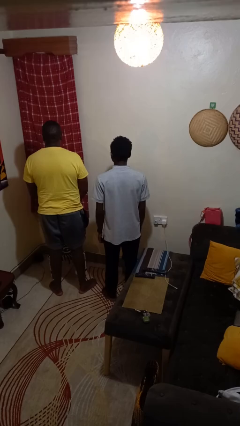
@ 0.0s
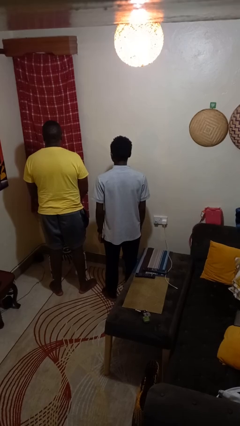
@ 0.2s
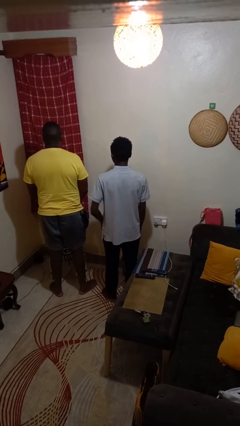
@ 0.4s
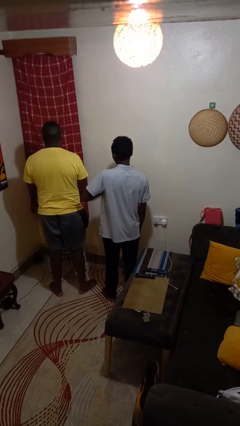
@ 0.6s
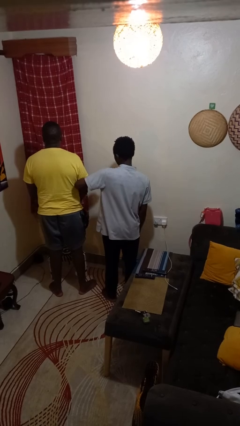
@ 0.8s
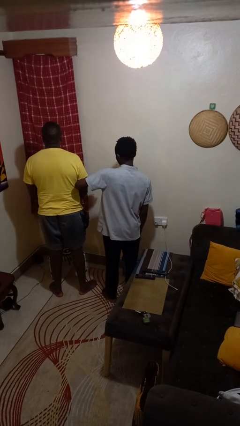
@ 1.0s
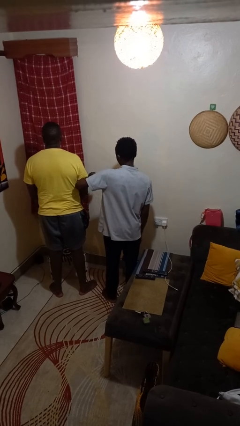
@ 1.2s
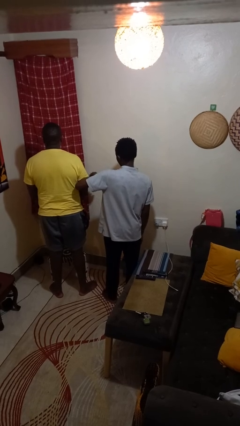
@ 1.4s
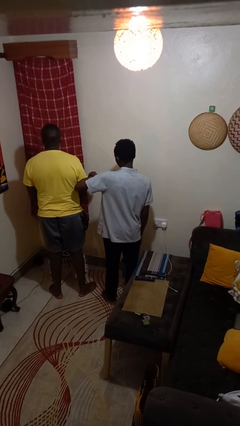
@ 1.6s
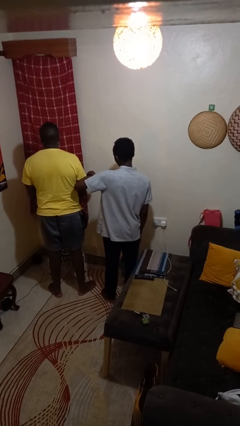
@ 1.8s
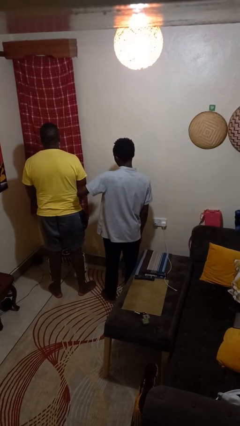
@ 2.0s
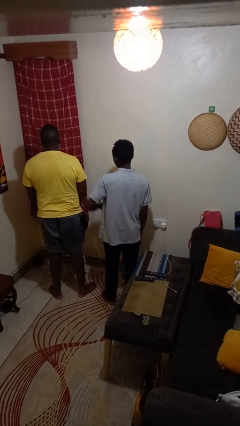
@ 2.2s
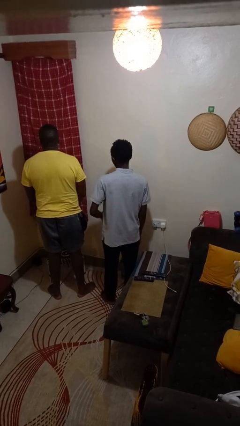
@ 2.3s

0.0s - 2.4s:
person nudges person with elbow

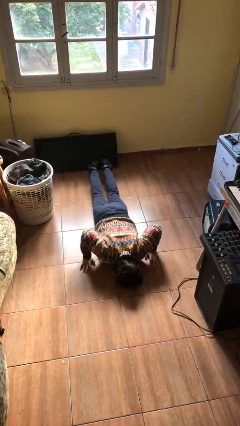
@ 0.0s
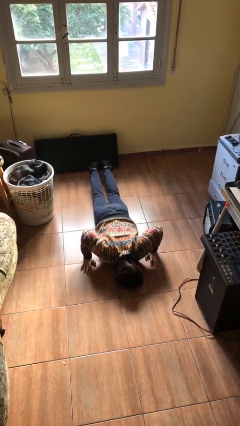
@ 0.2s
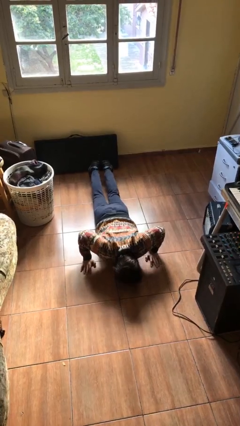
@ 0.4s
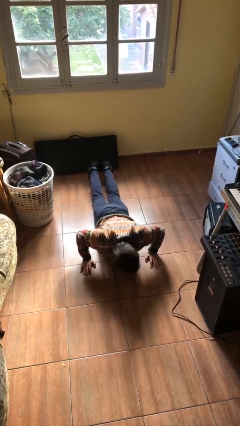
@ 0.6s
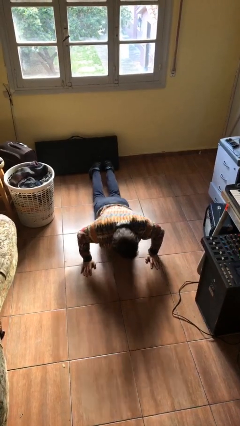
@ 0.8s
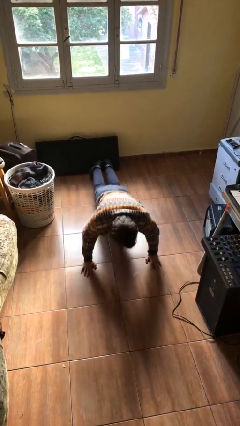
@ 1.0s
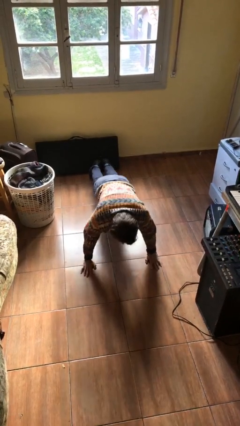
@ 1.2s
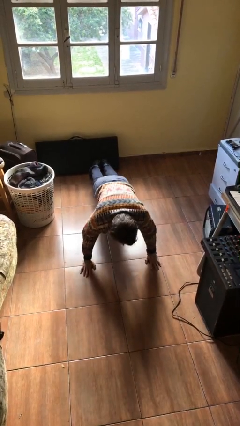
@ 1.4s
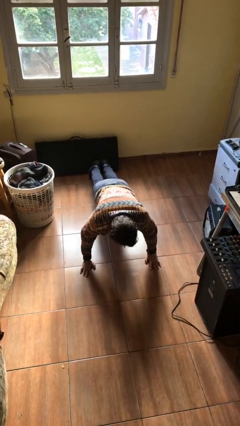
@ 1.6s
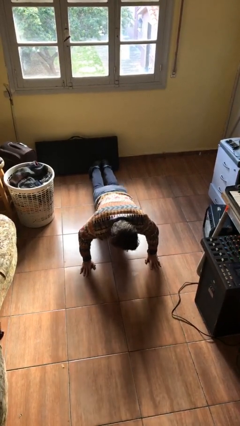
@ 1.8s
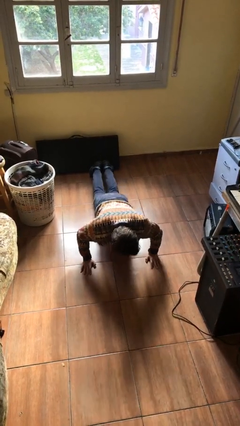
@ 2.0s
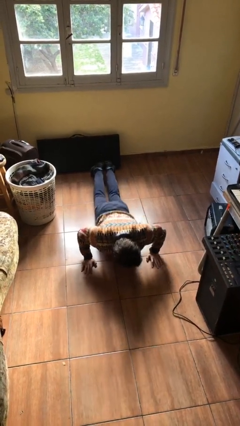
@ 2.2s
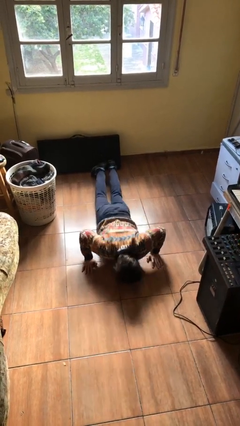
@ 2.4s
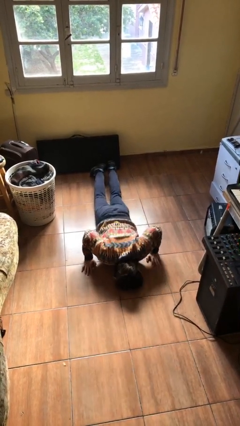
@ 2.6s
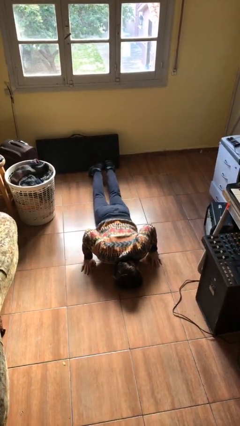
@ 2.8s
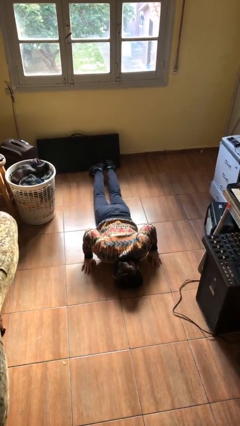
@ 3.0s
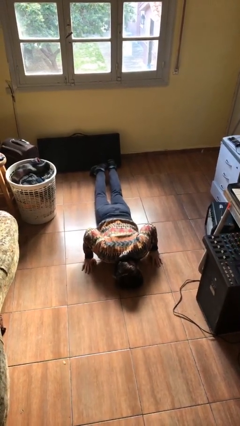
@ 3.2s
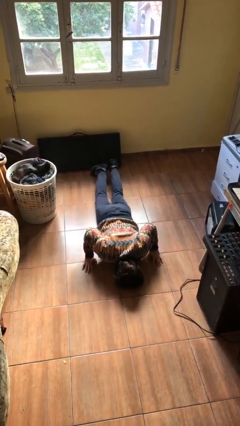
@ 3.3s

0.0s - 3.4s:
person exercises with pushup

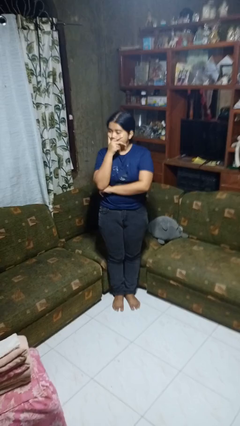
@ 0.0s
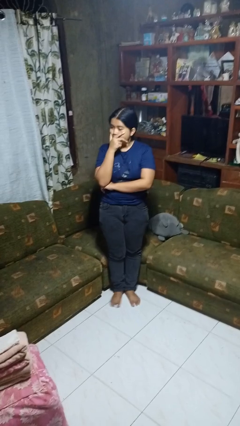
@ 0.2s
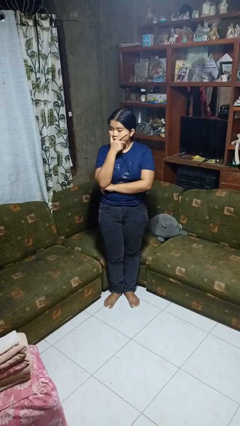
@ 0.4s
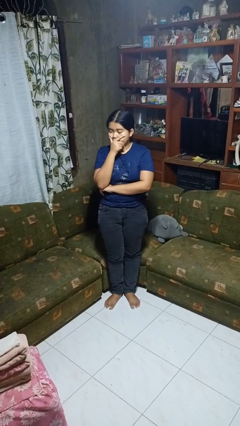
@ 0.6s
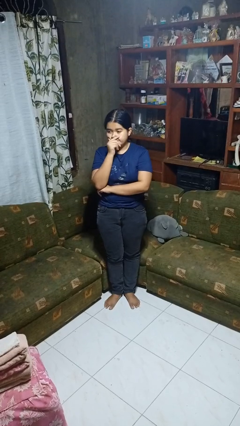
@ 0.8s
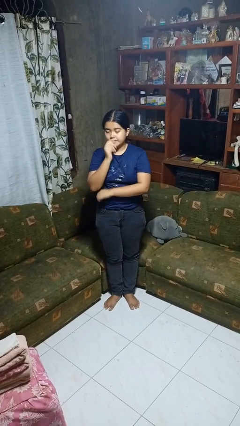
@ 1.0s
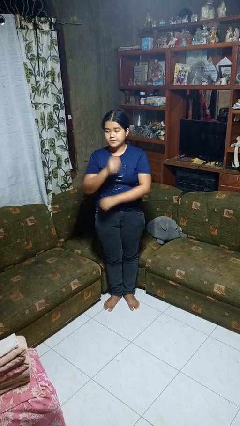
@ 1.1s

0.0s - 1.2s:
person strokes chin

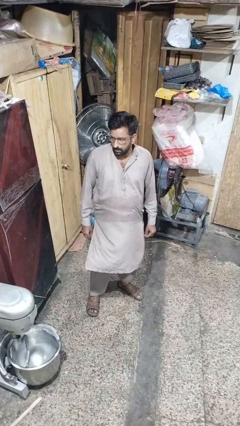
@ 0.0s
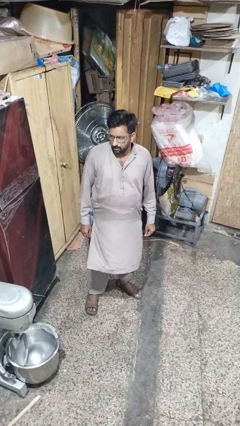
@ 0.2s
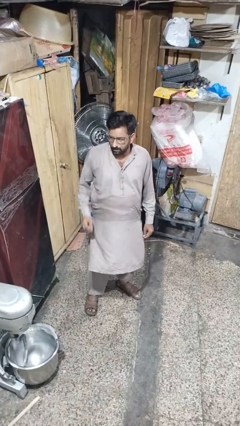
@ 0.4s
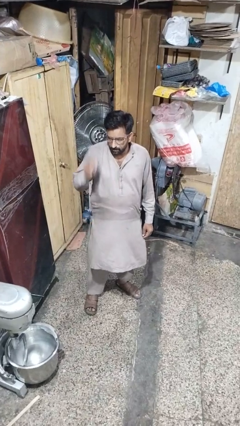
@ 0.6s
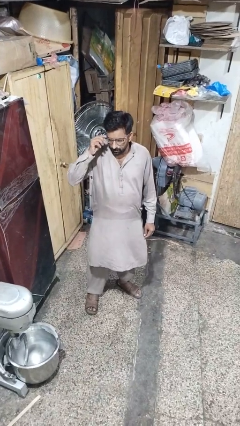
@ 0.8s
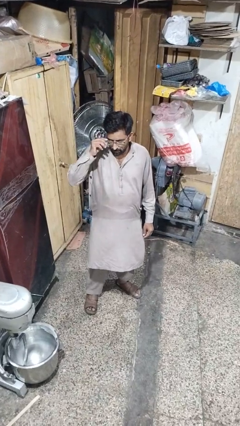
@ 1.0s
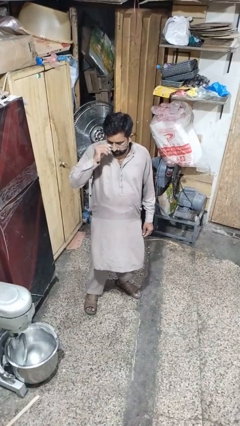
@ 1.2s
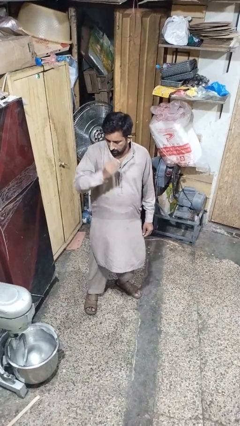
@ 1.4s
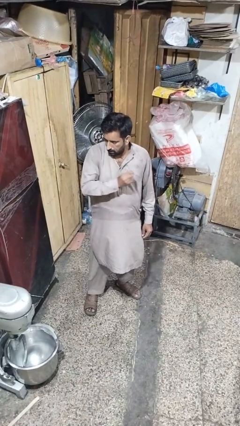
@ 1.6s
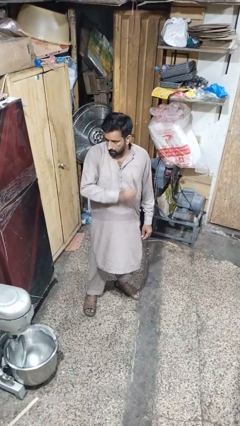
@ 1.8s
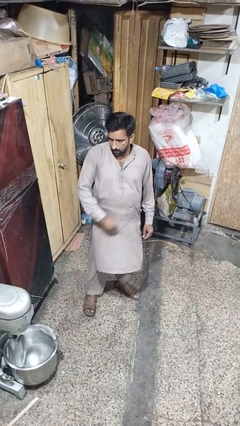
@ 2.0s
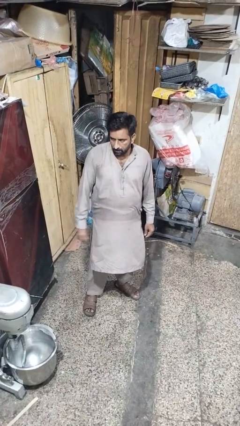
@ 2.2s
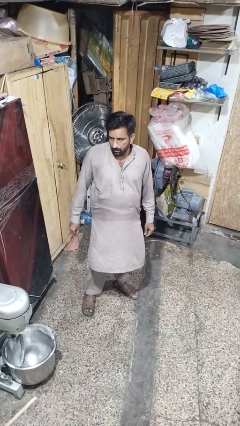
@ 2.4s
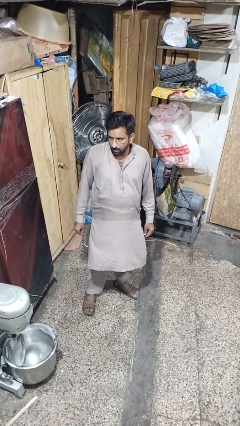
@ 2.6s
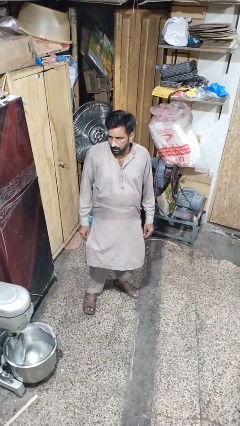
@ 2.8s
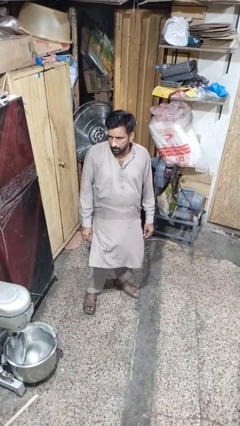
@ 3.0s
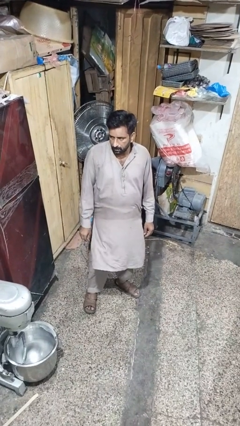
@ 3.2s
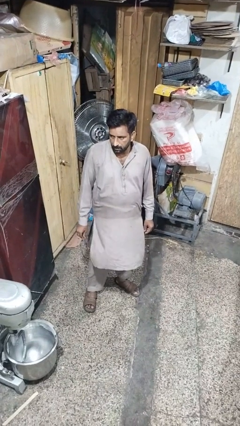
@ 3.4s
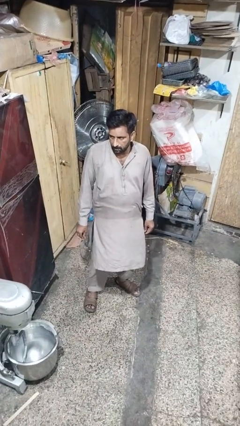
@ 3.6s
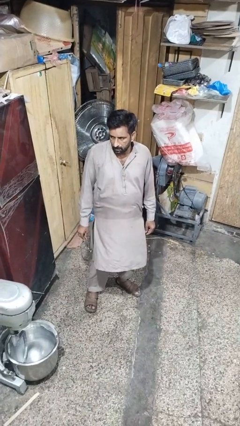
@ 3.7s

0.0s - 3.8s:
person takes off glasses

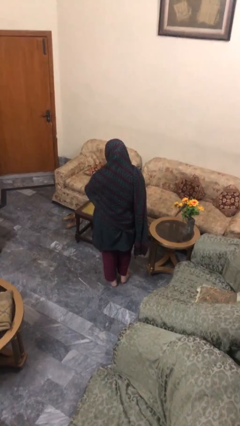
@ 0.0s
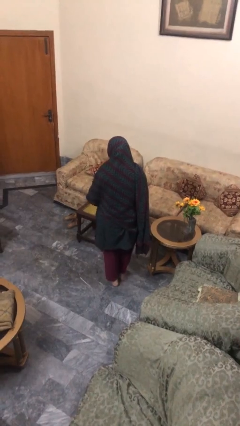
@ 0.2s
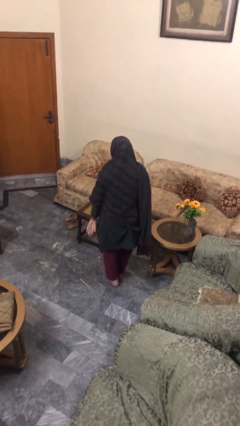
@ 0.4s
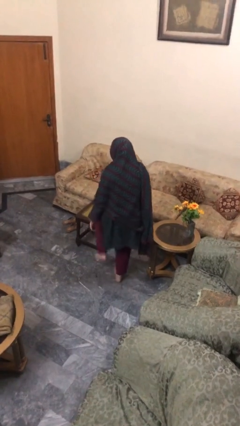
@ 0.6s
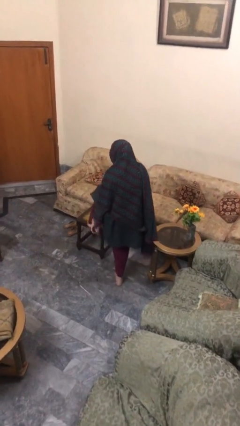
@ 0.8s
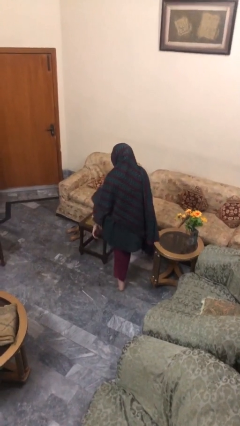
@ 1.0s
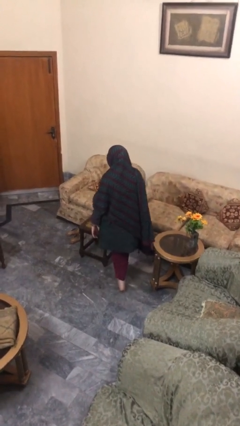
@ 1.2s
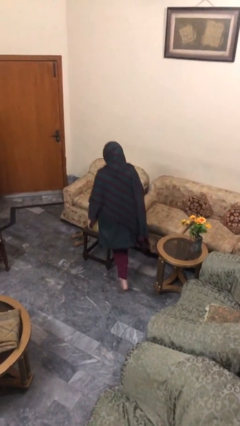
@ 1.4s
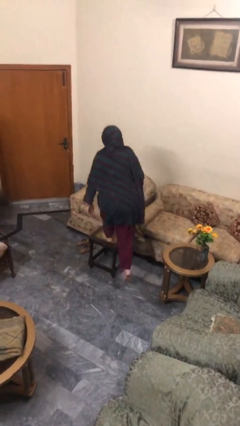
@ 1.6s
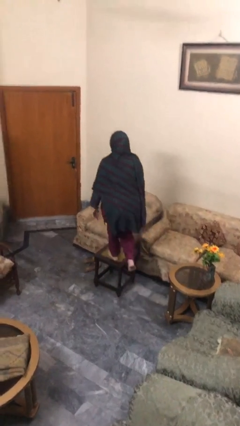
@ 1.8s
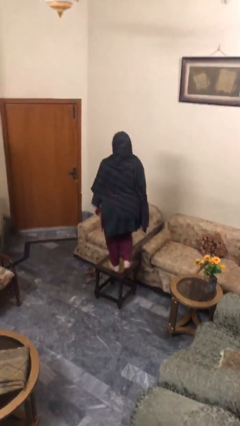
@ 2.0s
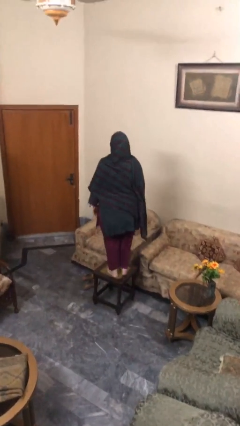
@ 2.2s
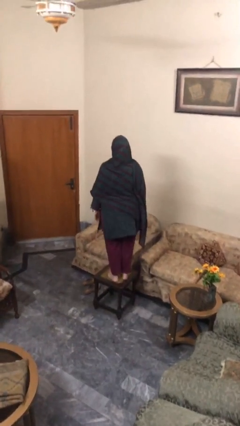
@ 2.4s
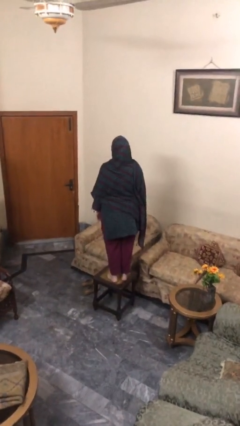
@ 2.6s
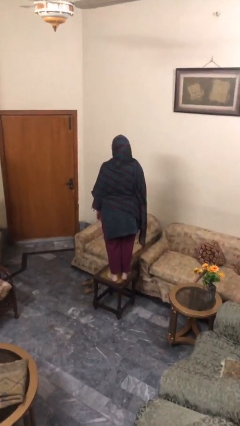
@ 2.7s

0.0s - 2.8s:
person climbs on table

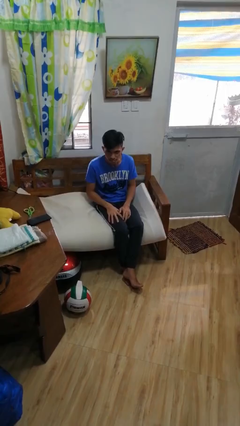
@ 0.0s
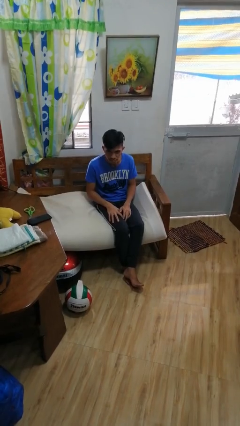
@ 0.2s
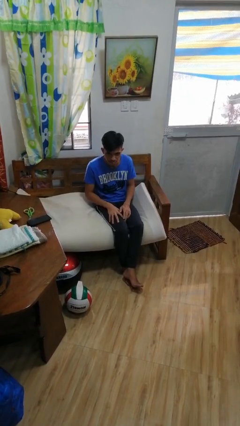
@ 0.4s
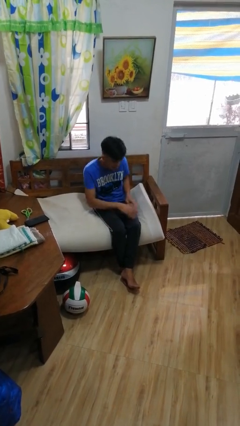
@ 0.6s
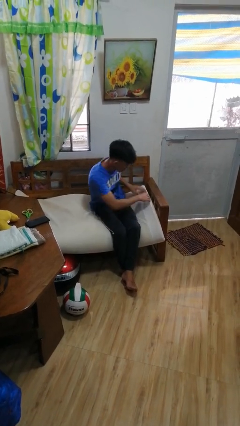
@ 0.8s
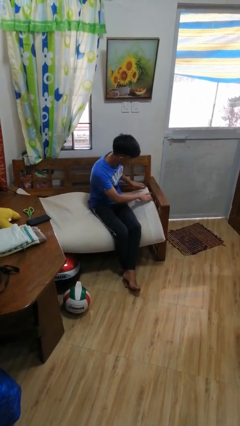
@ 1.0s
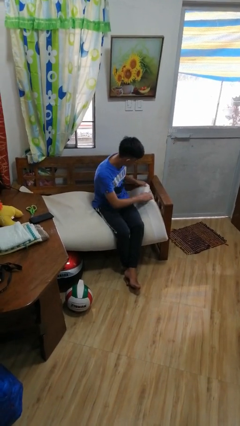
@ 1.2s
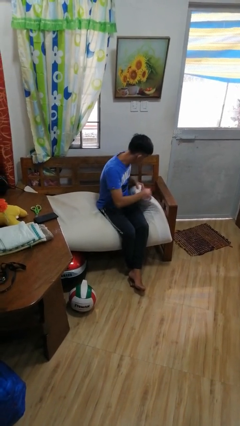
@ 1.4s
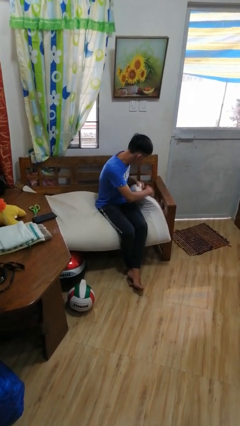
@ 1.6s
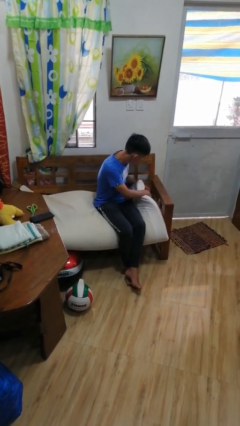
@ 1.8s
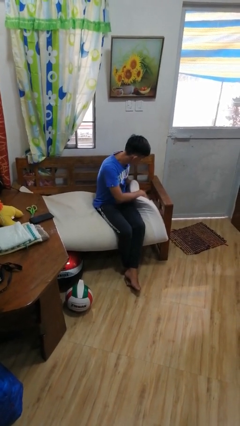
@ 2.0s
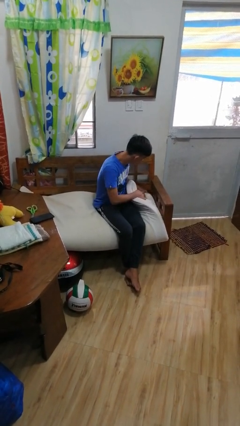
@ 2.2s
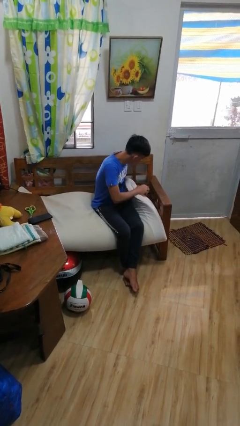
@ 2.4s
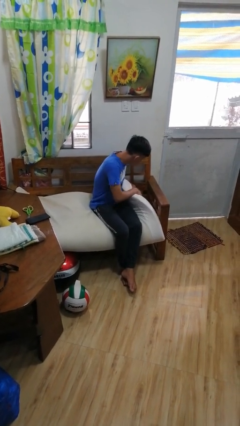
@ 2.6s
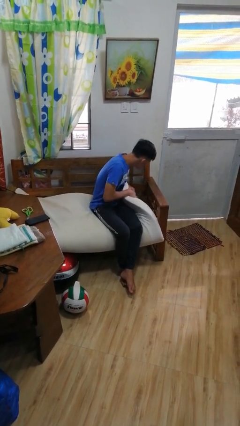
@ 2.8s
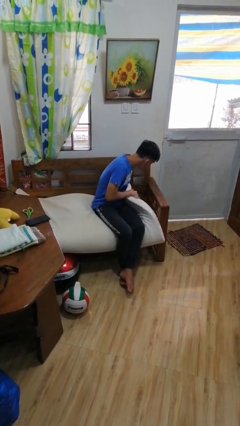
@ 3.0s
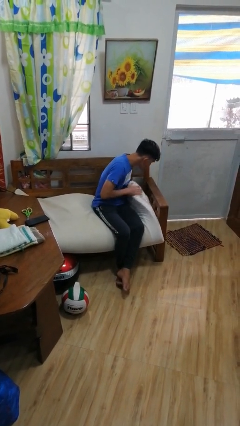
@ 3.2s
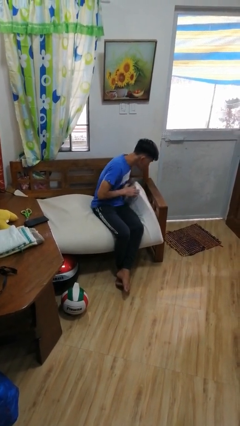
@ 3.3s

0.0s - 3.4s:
person searches in couch

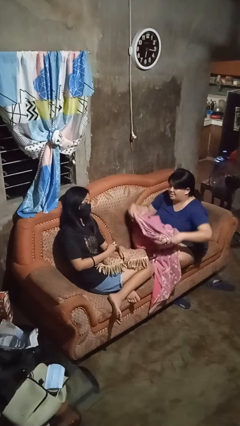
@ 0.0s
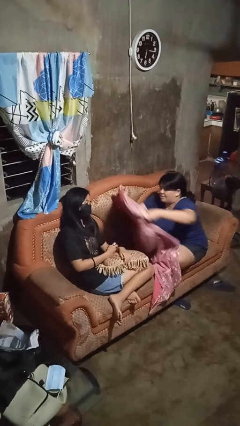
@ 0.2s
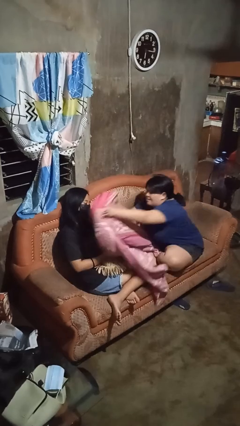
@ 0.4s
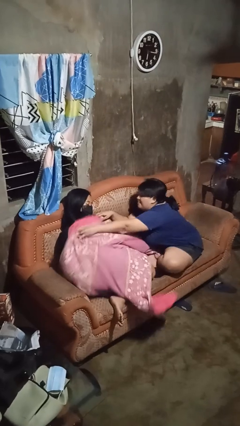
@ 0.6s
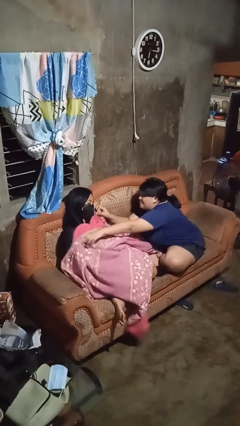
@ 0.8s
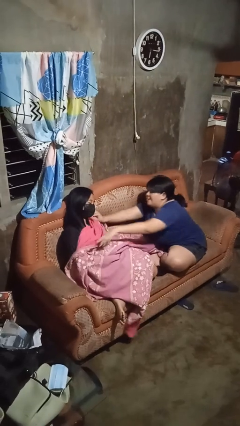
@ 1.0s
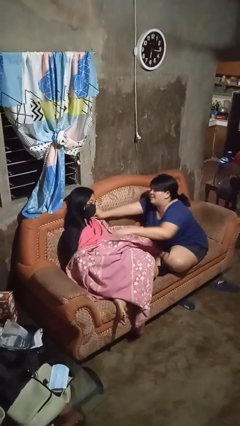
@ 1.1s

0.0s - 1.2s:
person covers friend with blanket
